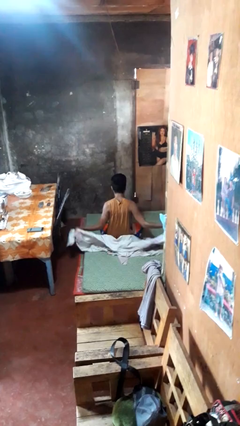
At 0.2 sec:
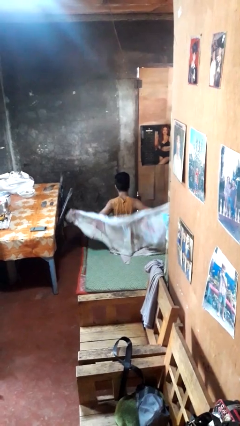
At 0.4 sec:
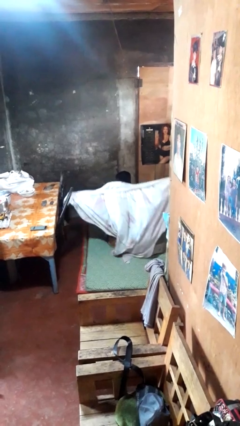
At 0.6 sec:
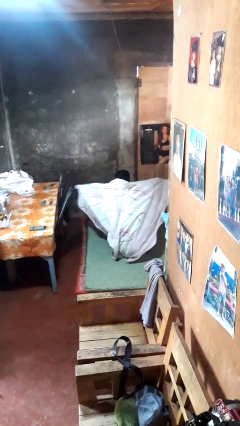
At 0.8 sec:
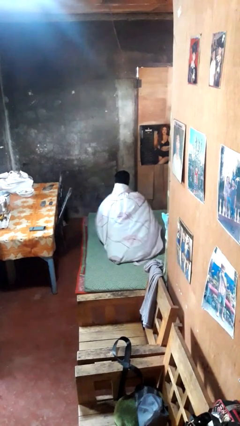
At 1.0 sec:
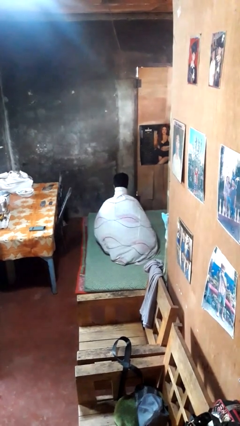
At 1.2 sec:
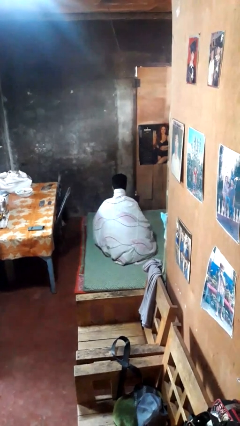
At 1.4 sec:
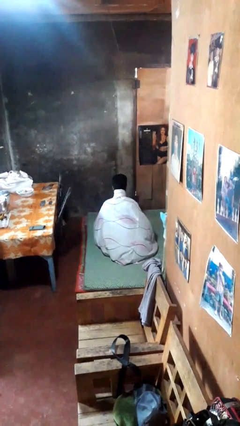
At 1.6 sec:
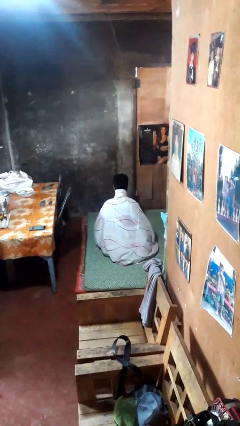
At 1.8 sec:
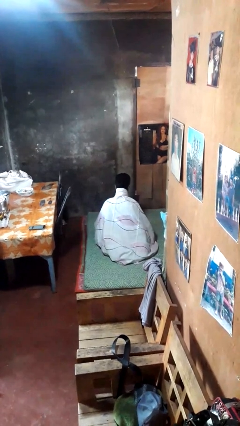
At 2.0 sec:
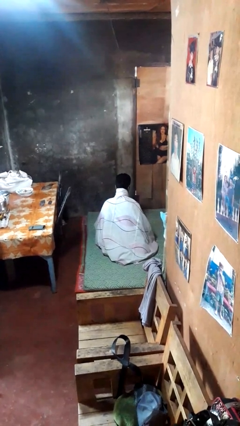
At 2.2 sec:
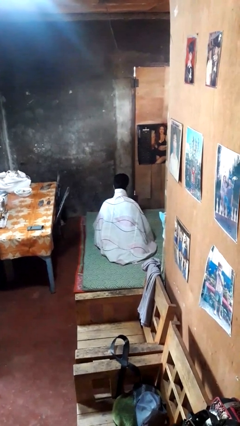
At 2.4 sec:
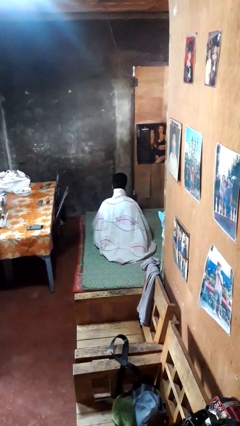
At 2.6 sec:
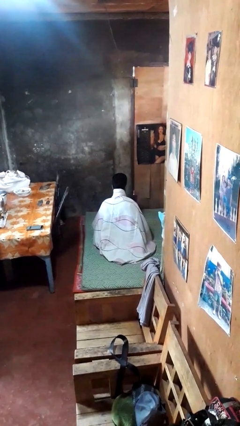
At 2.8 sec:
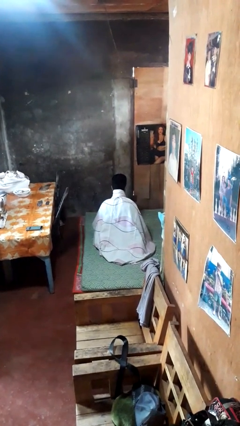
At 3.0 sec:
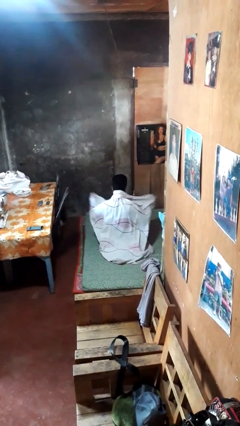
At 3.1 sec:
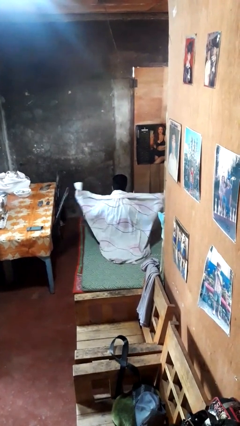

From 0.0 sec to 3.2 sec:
person covers with blanket

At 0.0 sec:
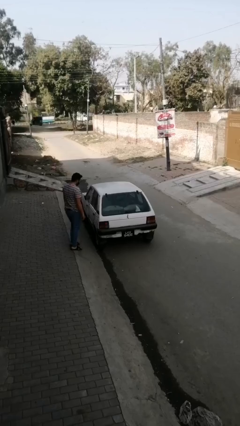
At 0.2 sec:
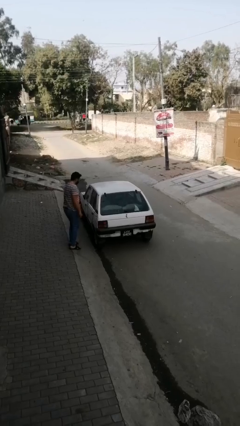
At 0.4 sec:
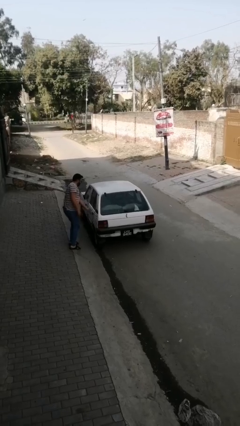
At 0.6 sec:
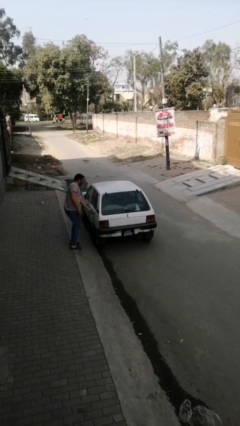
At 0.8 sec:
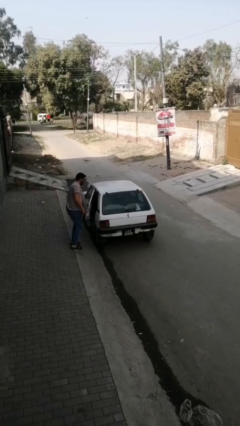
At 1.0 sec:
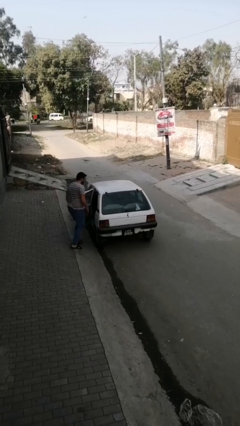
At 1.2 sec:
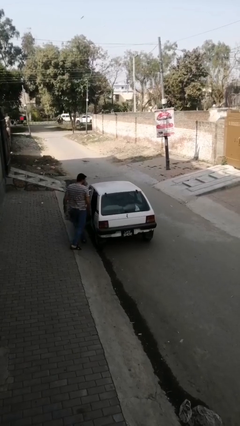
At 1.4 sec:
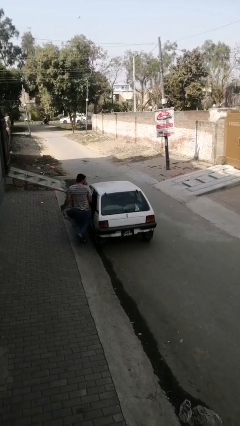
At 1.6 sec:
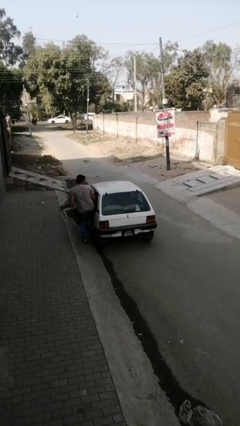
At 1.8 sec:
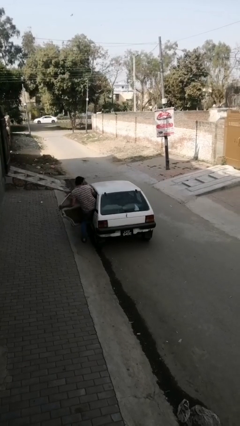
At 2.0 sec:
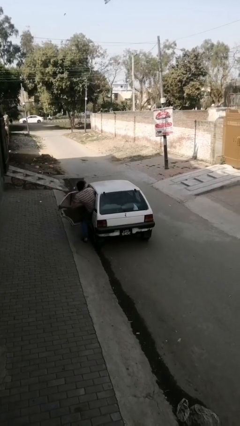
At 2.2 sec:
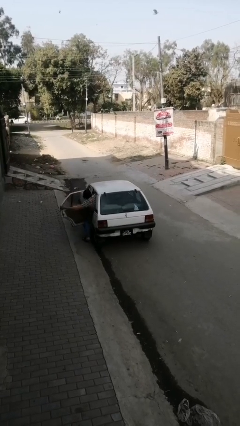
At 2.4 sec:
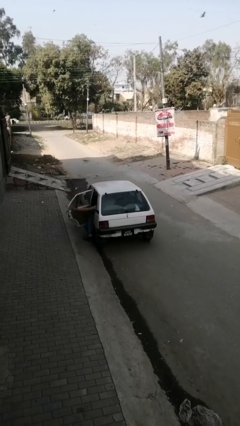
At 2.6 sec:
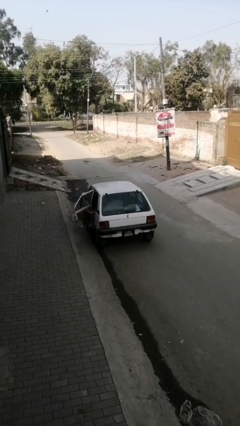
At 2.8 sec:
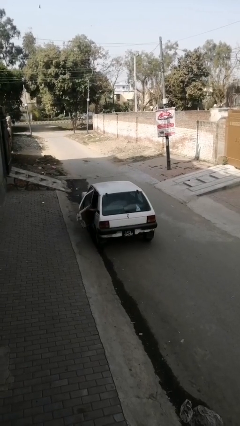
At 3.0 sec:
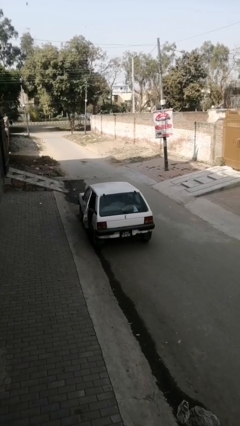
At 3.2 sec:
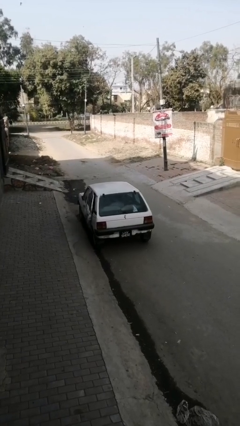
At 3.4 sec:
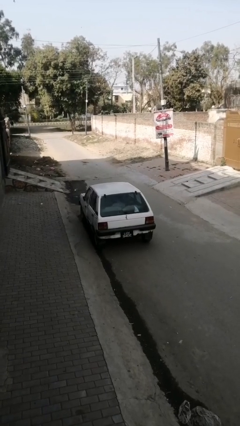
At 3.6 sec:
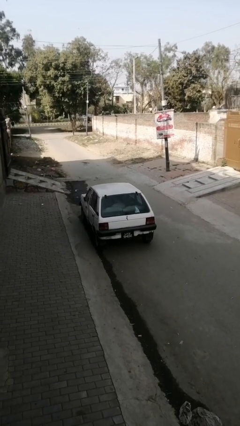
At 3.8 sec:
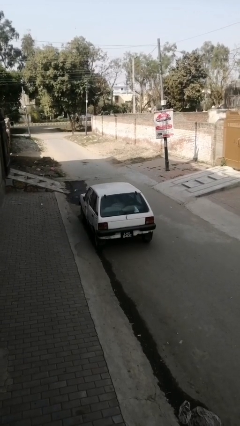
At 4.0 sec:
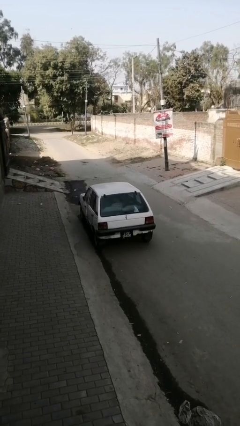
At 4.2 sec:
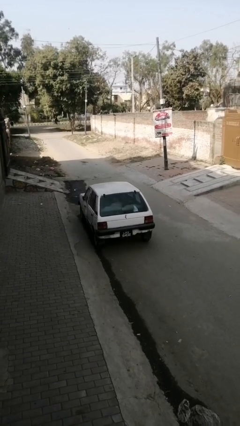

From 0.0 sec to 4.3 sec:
car picks up person

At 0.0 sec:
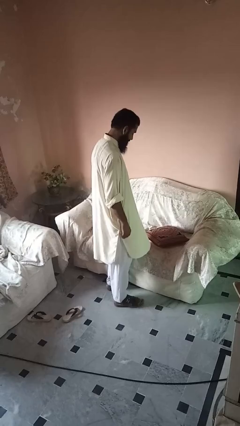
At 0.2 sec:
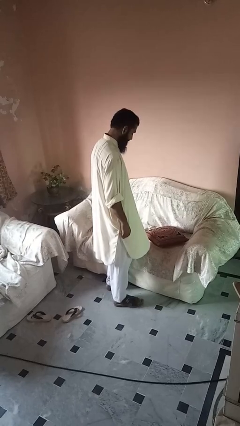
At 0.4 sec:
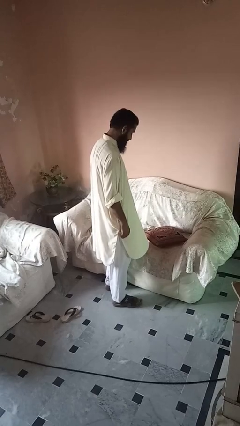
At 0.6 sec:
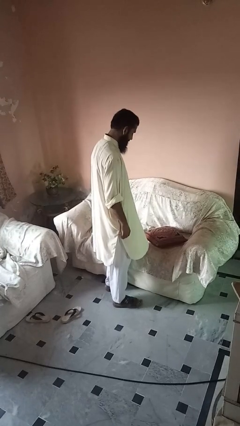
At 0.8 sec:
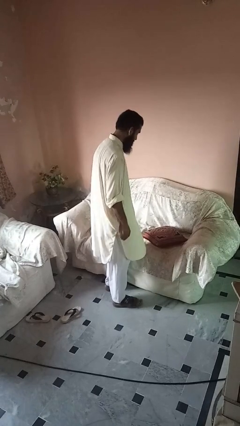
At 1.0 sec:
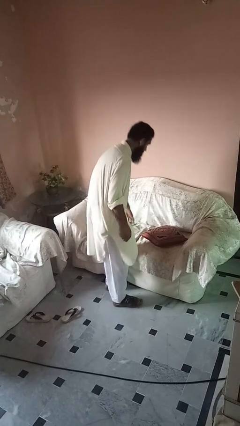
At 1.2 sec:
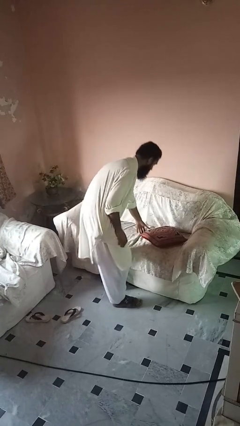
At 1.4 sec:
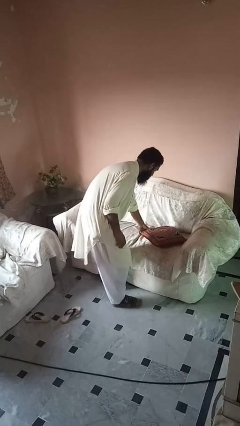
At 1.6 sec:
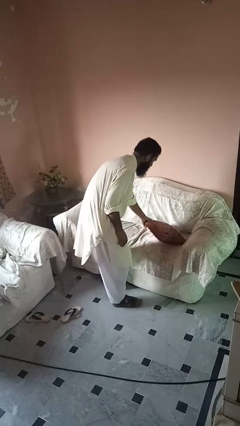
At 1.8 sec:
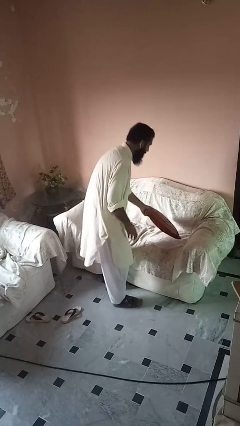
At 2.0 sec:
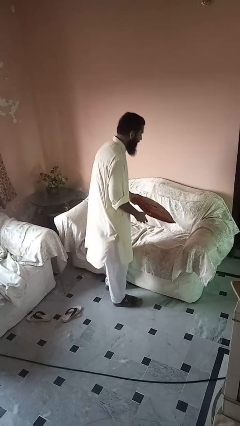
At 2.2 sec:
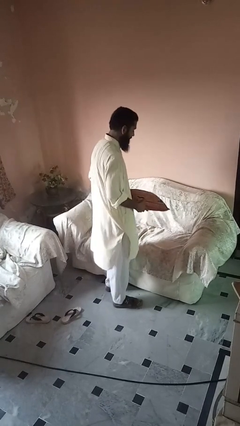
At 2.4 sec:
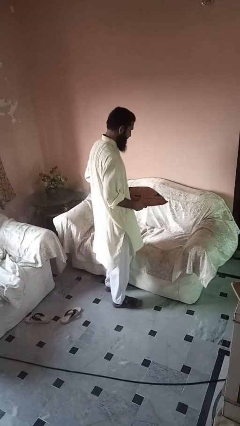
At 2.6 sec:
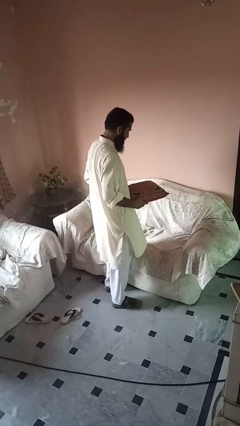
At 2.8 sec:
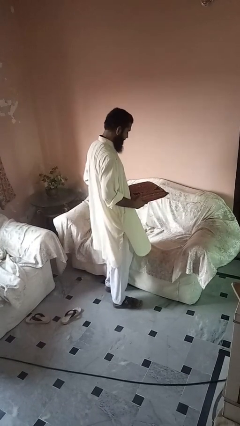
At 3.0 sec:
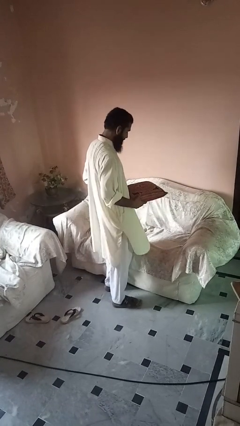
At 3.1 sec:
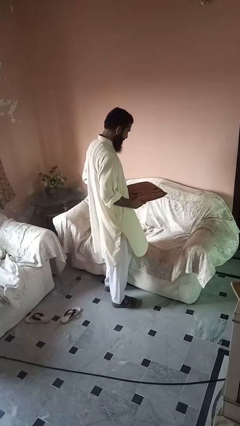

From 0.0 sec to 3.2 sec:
person picks up object from couch

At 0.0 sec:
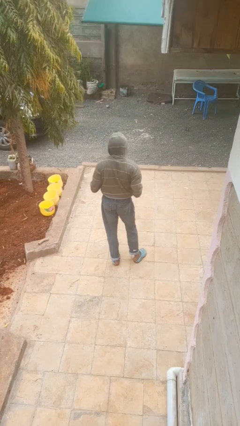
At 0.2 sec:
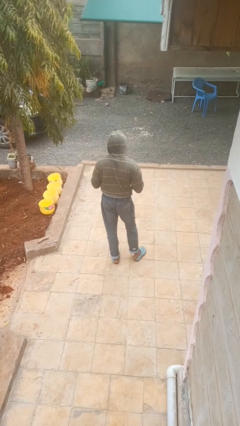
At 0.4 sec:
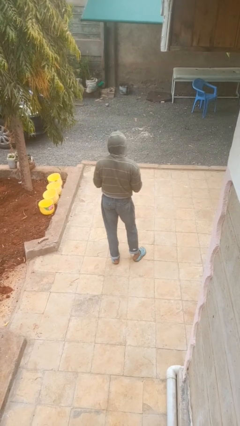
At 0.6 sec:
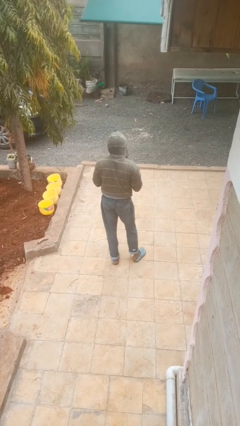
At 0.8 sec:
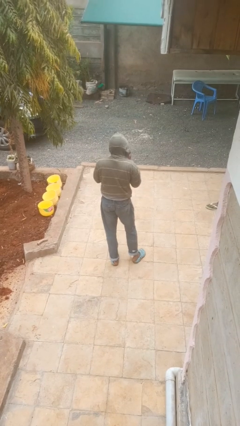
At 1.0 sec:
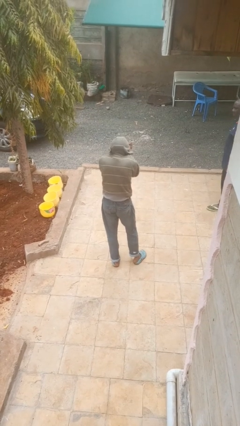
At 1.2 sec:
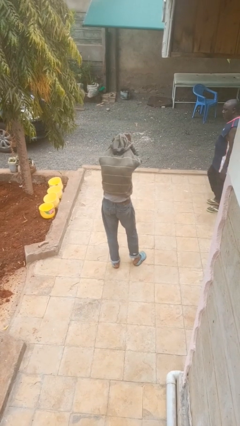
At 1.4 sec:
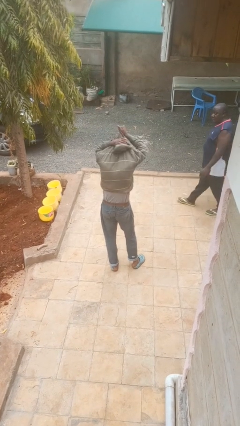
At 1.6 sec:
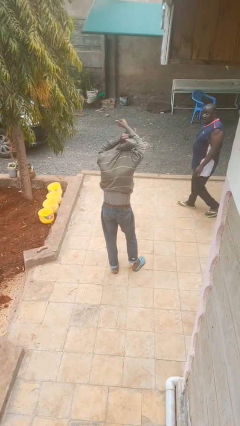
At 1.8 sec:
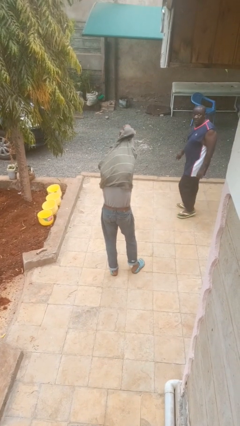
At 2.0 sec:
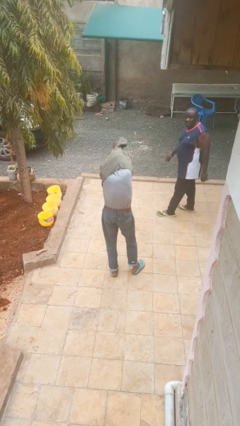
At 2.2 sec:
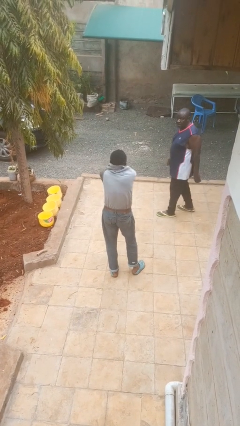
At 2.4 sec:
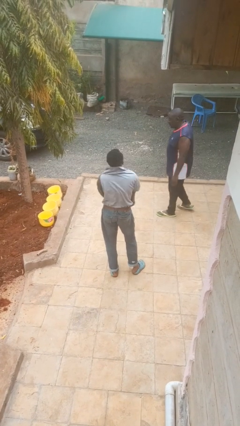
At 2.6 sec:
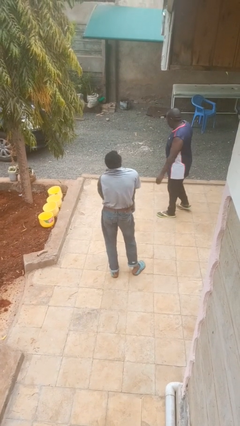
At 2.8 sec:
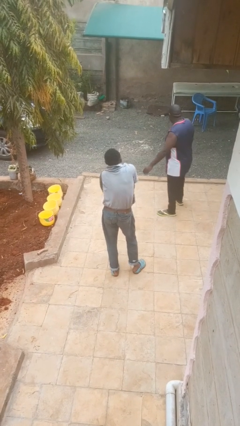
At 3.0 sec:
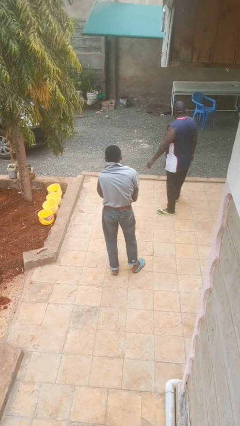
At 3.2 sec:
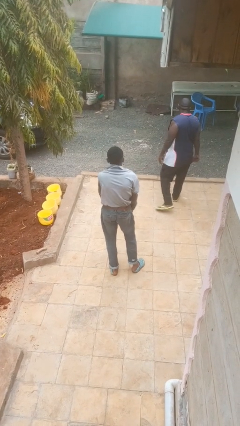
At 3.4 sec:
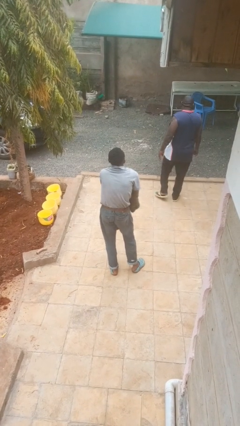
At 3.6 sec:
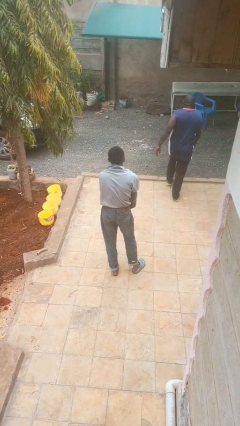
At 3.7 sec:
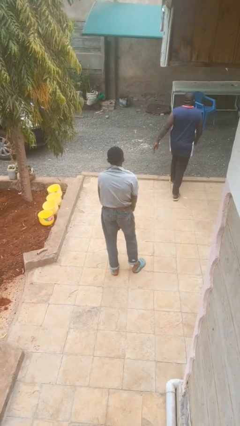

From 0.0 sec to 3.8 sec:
person takes off hoodie

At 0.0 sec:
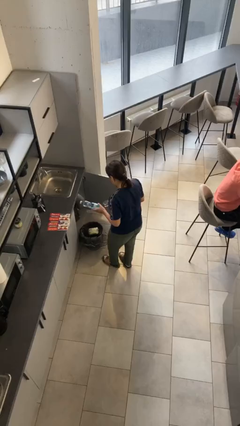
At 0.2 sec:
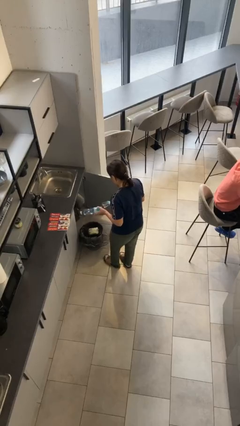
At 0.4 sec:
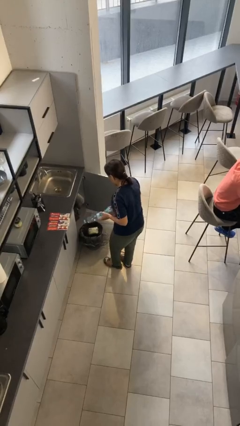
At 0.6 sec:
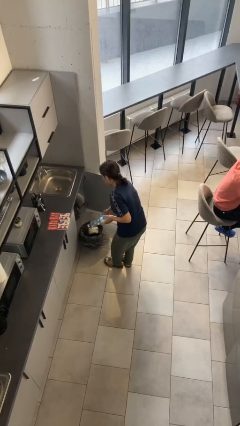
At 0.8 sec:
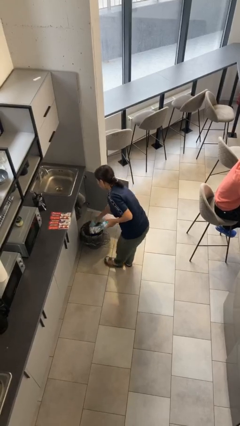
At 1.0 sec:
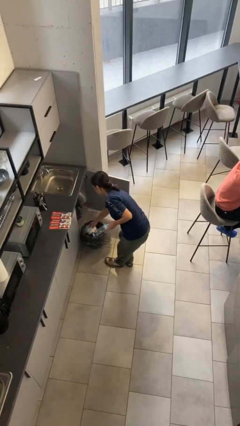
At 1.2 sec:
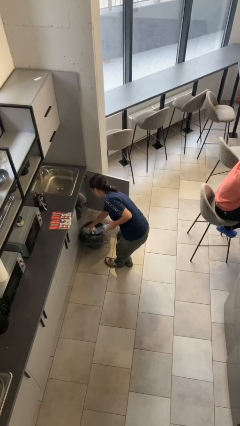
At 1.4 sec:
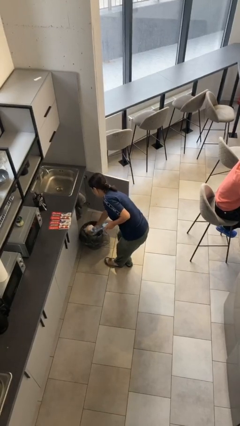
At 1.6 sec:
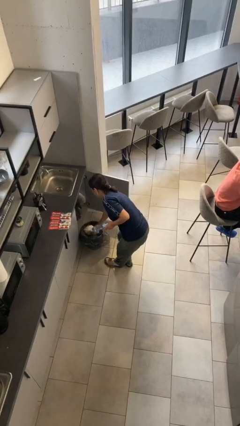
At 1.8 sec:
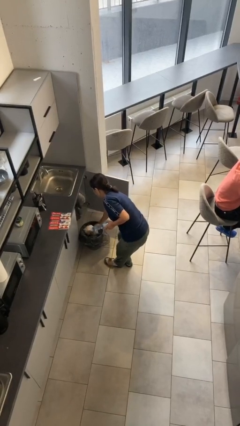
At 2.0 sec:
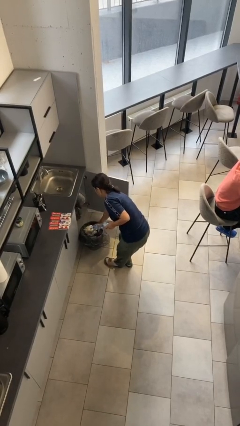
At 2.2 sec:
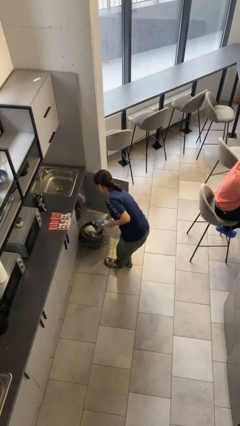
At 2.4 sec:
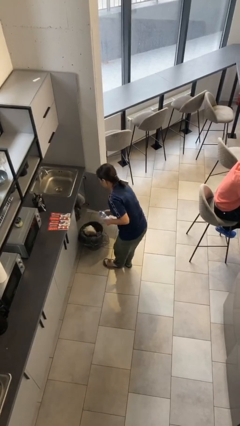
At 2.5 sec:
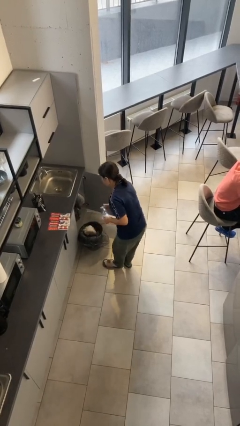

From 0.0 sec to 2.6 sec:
person discards trash

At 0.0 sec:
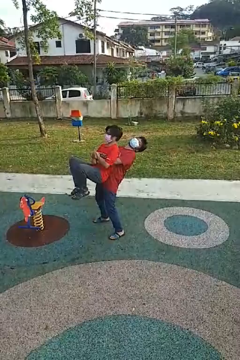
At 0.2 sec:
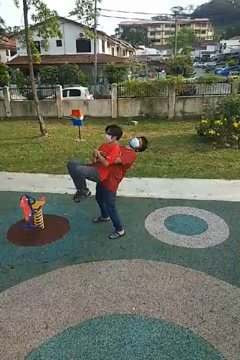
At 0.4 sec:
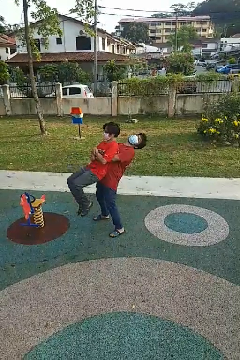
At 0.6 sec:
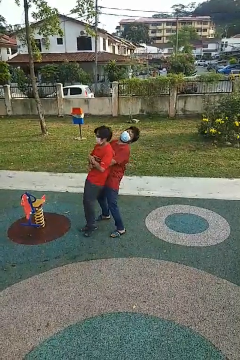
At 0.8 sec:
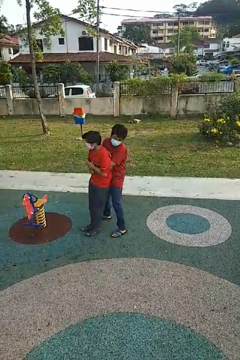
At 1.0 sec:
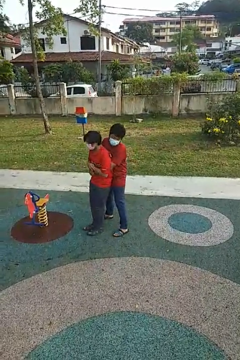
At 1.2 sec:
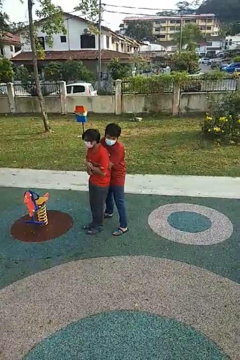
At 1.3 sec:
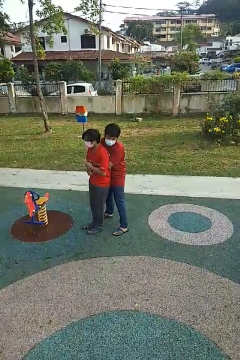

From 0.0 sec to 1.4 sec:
person puts down person
